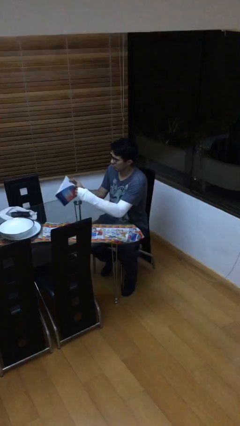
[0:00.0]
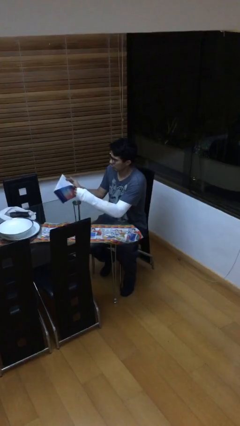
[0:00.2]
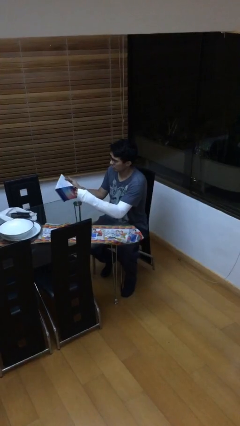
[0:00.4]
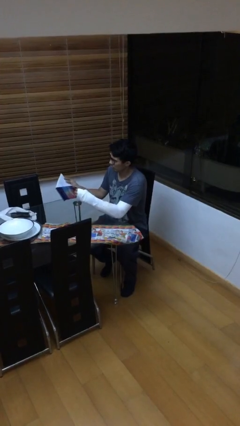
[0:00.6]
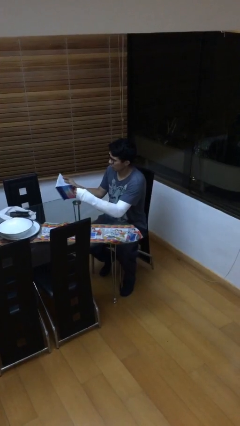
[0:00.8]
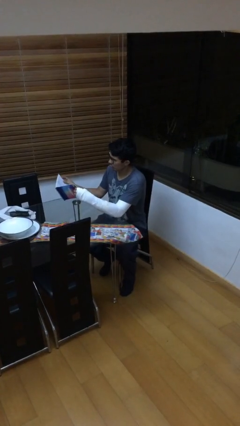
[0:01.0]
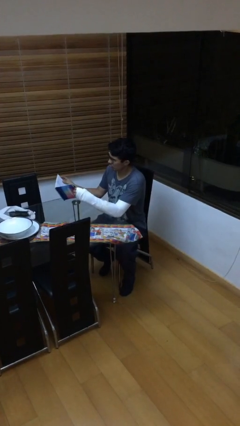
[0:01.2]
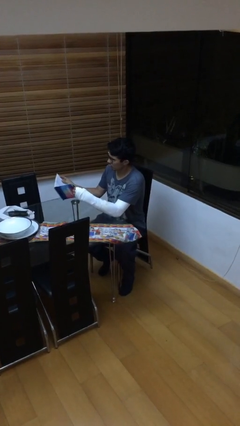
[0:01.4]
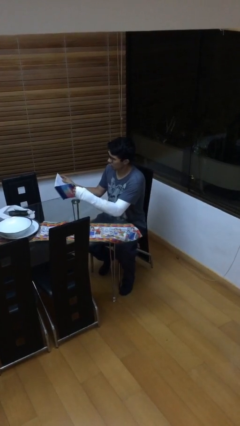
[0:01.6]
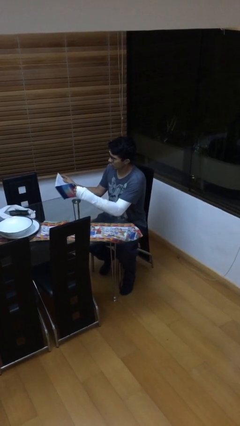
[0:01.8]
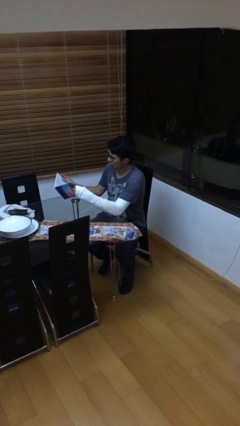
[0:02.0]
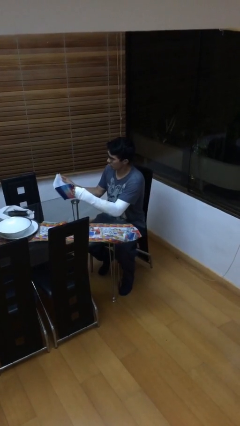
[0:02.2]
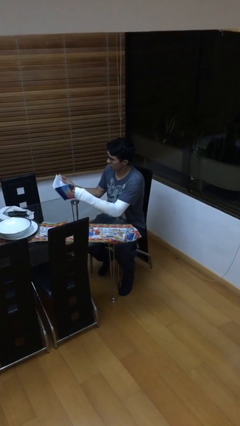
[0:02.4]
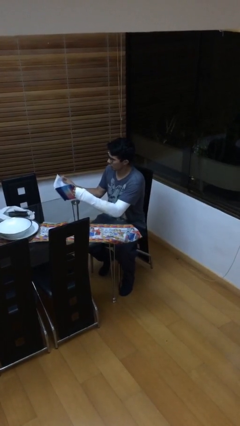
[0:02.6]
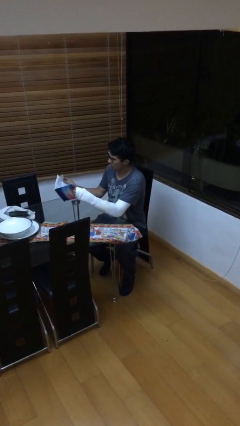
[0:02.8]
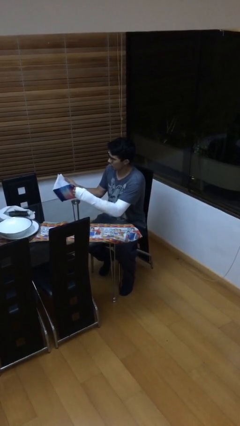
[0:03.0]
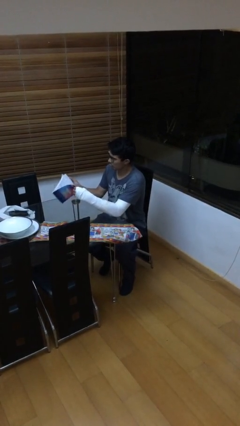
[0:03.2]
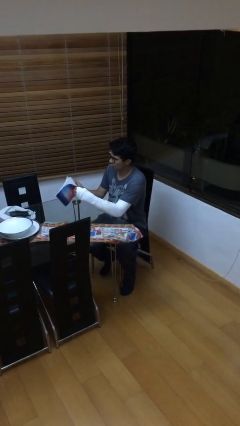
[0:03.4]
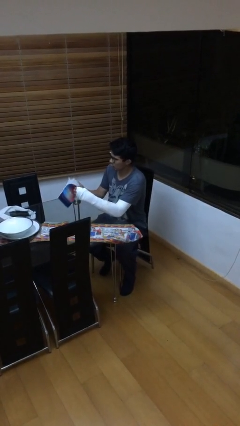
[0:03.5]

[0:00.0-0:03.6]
person reads document

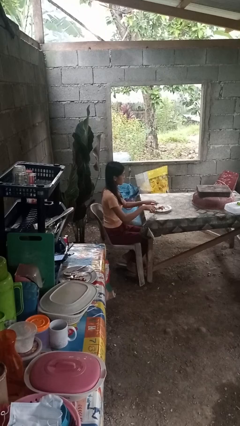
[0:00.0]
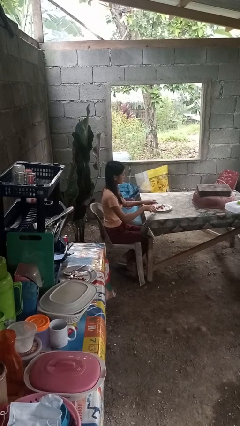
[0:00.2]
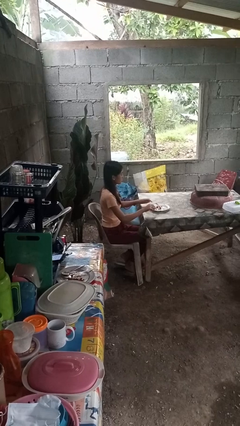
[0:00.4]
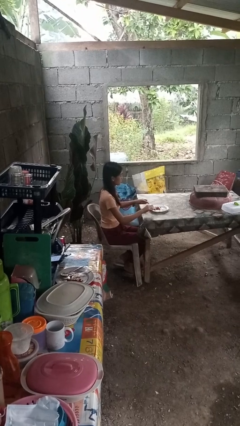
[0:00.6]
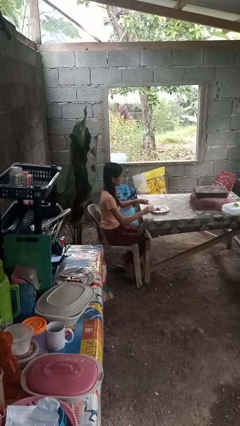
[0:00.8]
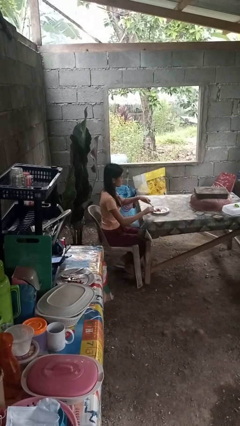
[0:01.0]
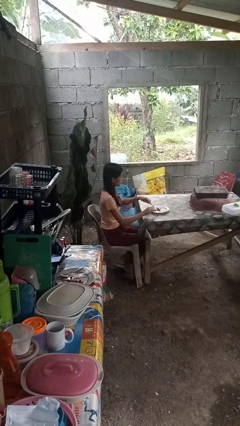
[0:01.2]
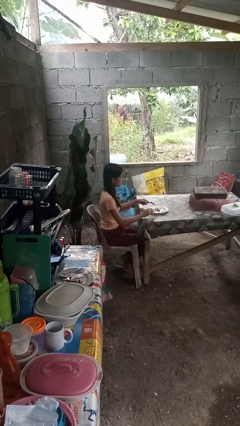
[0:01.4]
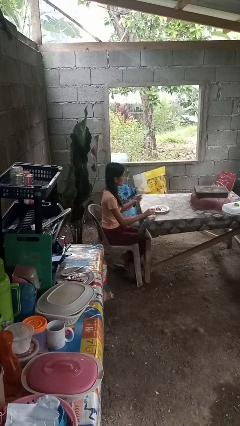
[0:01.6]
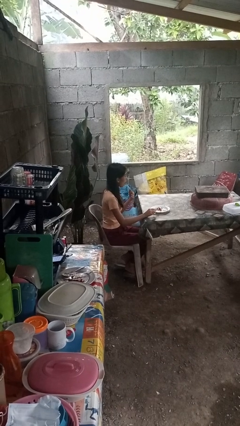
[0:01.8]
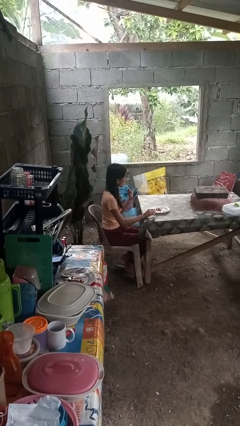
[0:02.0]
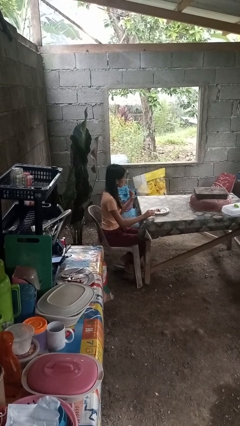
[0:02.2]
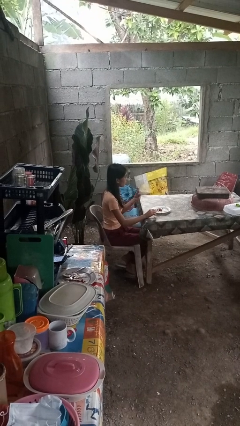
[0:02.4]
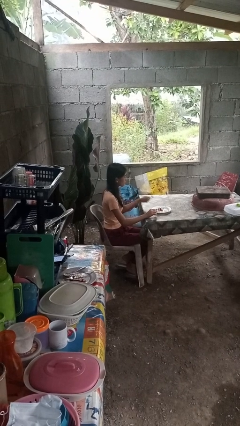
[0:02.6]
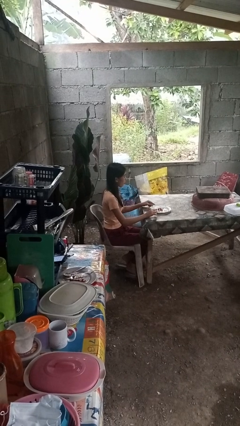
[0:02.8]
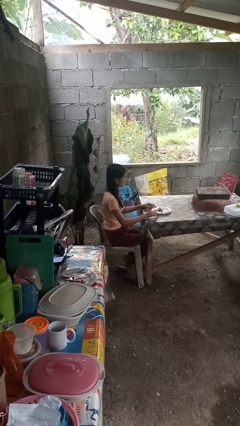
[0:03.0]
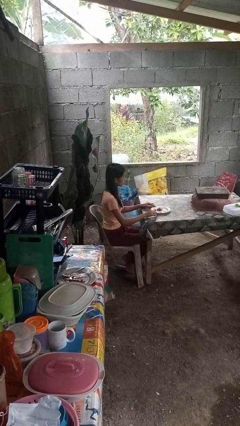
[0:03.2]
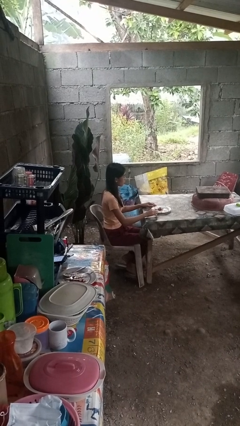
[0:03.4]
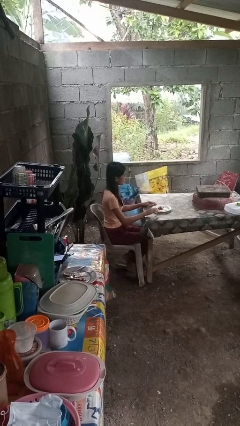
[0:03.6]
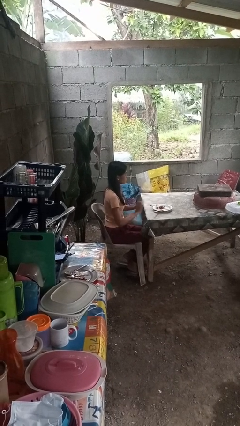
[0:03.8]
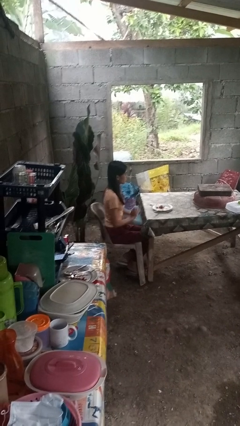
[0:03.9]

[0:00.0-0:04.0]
person eats with utensil

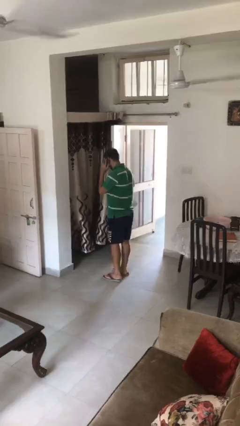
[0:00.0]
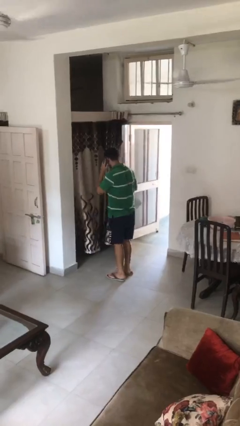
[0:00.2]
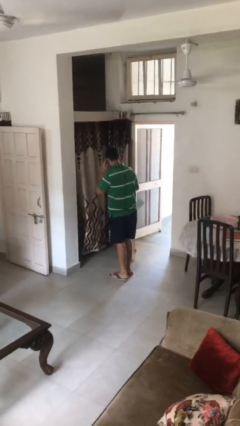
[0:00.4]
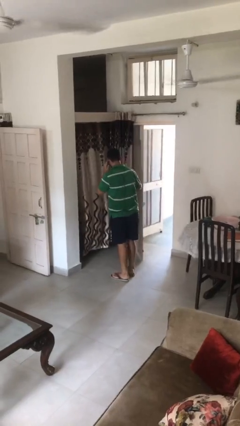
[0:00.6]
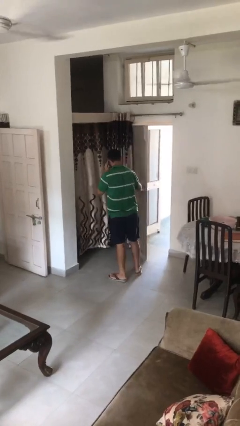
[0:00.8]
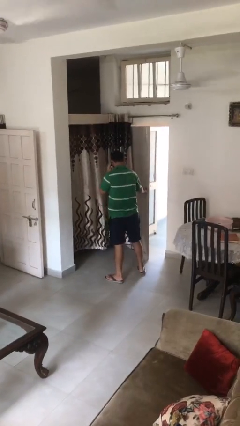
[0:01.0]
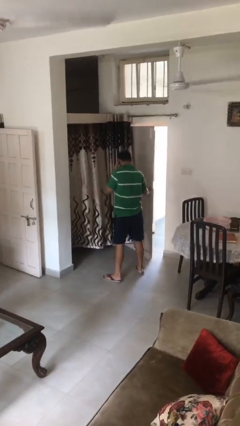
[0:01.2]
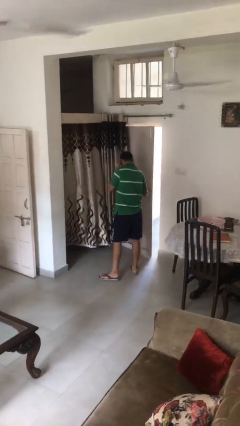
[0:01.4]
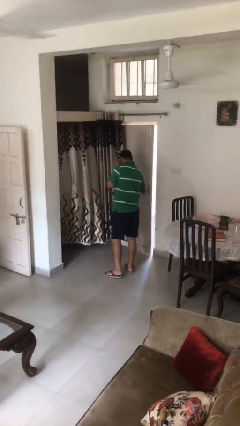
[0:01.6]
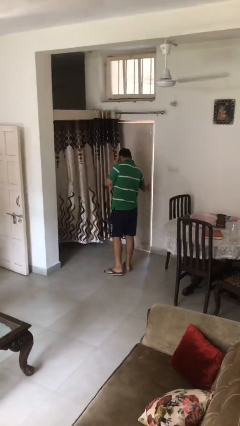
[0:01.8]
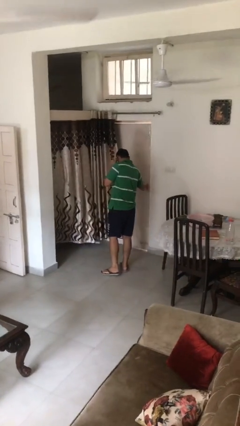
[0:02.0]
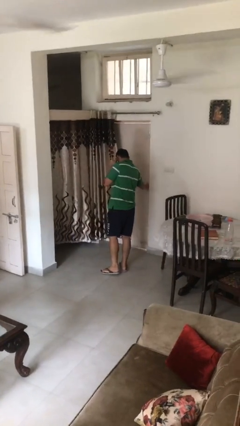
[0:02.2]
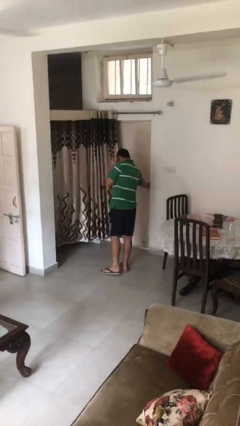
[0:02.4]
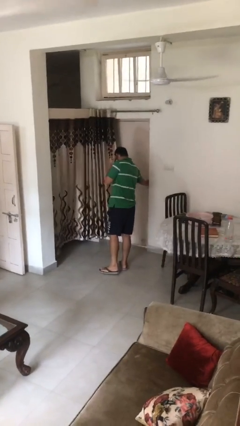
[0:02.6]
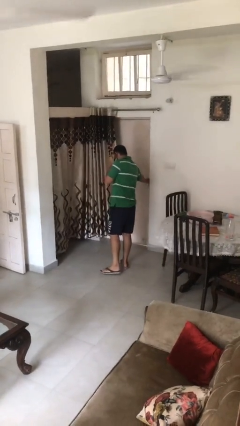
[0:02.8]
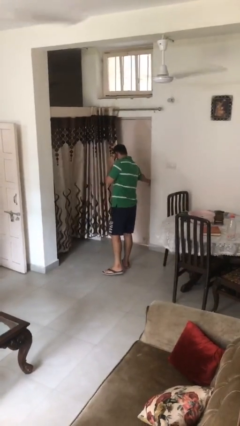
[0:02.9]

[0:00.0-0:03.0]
person closes facility door

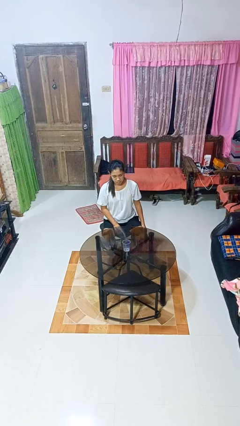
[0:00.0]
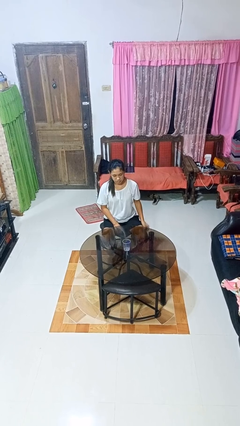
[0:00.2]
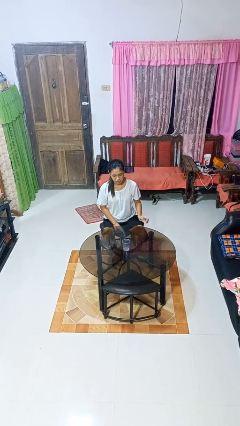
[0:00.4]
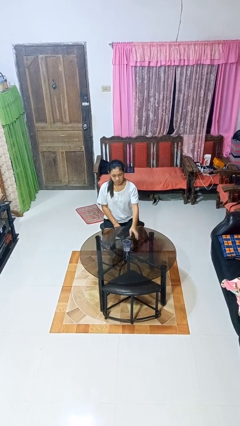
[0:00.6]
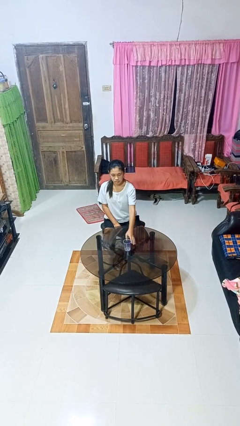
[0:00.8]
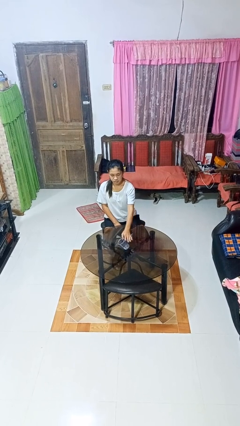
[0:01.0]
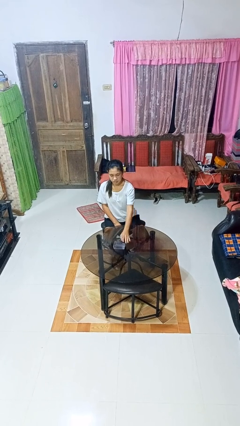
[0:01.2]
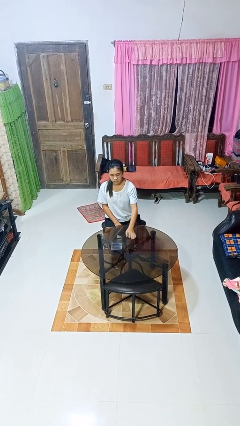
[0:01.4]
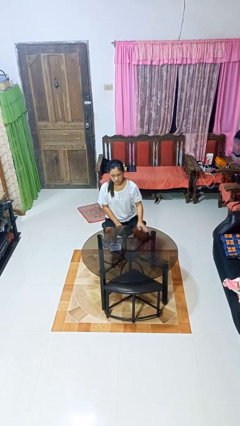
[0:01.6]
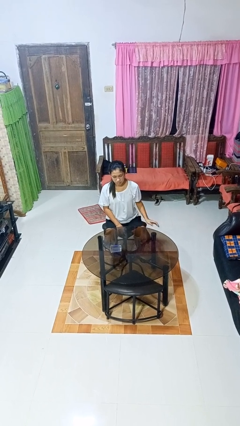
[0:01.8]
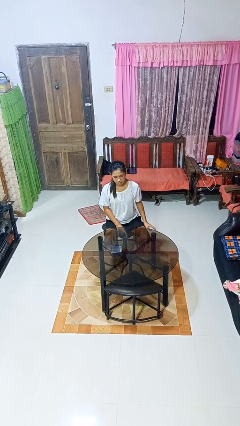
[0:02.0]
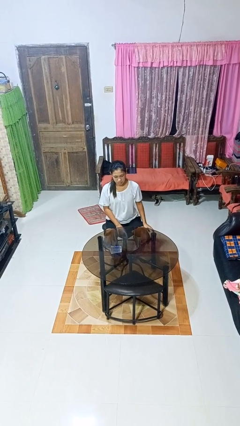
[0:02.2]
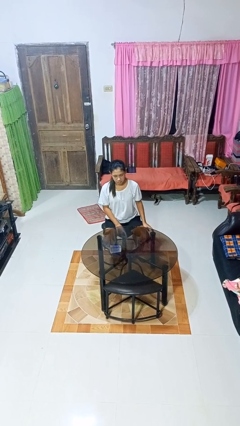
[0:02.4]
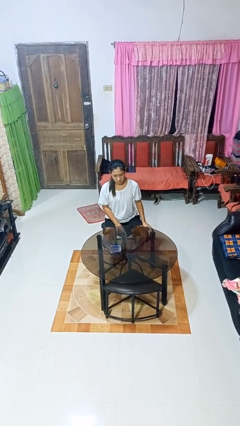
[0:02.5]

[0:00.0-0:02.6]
person knocks over glass

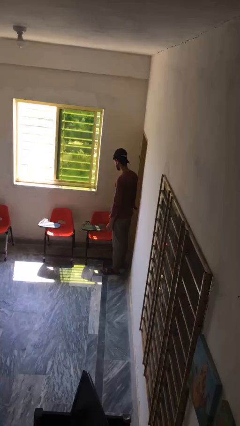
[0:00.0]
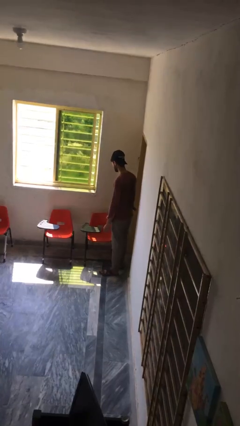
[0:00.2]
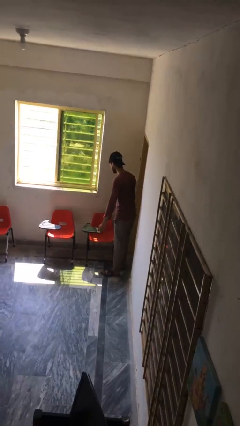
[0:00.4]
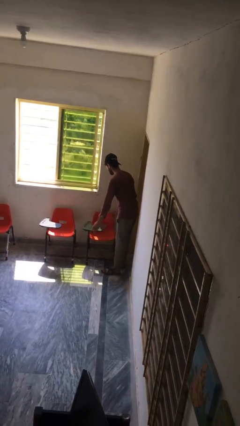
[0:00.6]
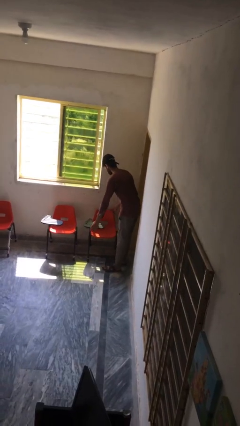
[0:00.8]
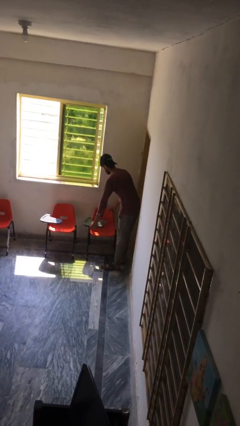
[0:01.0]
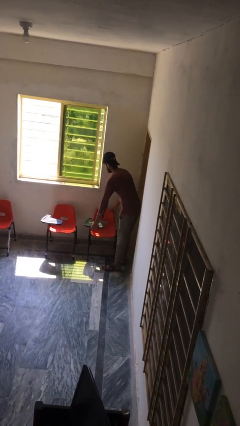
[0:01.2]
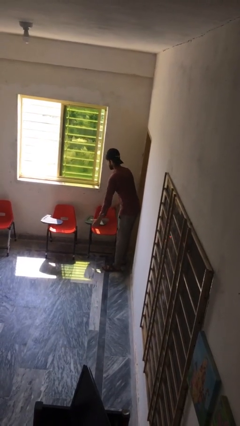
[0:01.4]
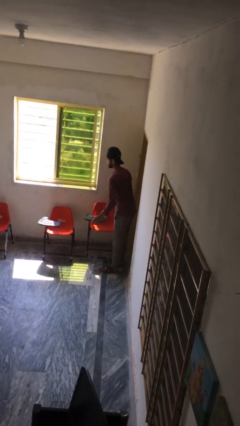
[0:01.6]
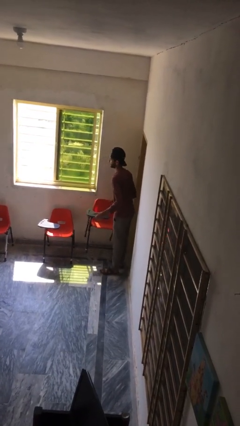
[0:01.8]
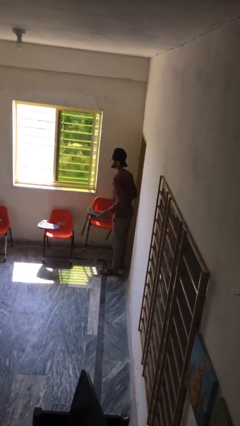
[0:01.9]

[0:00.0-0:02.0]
person picks up object from floor

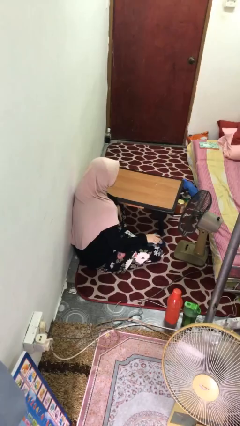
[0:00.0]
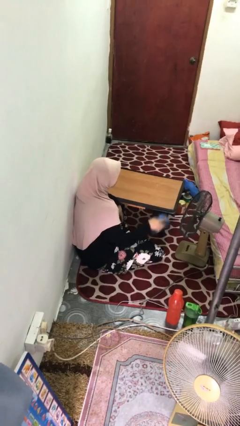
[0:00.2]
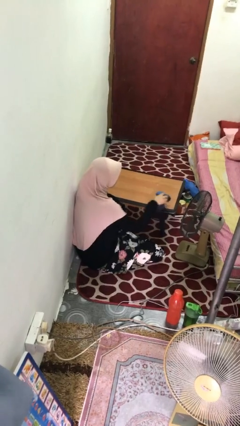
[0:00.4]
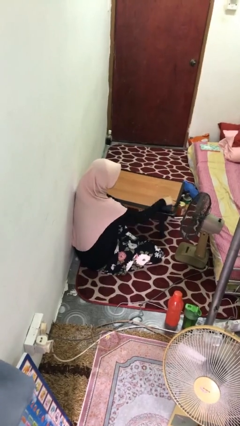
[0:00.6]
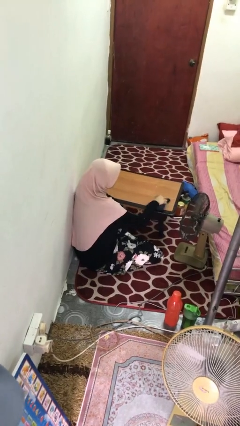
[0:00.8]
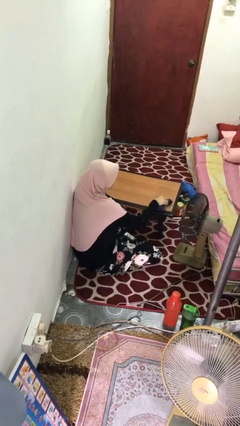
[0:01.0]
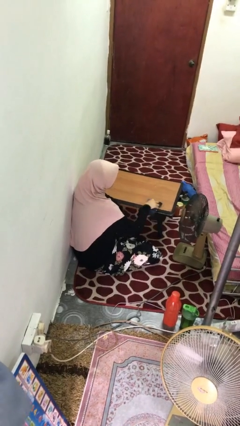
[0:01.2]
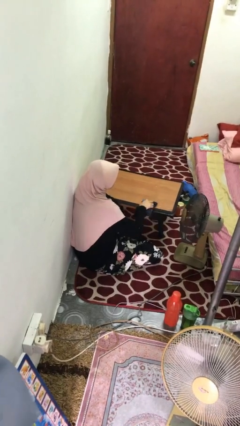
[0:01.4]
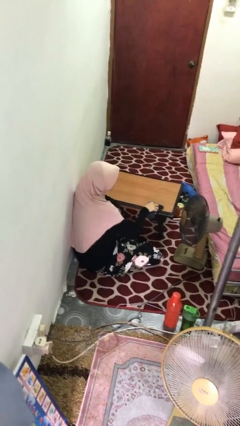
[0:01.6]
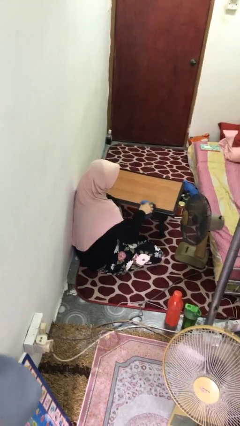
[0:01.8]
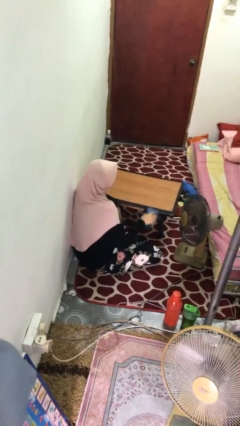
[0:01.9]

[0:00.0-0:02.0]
person cleans table with rag

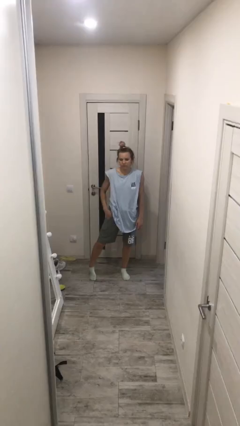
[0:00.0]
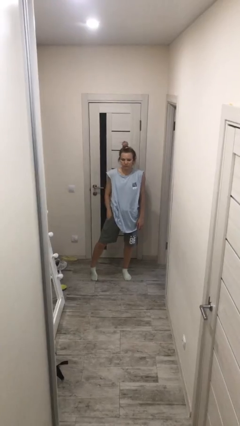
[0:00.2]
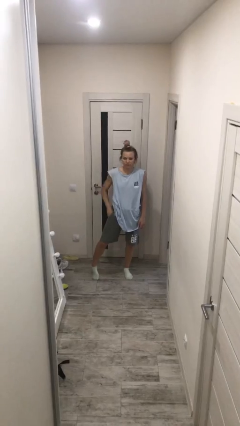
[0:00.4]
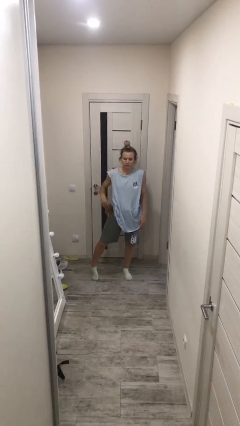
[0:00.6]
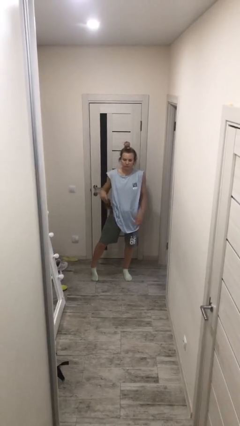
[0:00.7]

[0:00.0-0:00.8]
person takes phone from pocket
